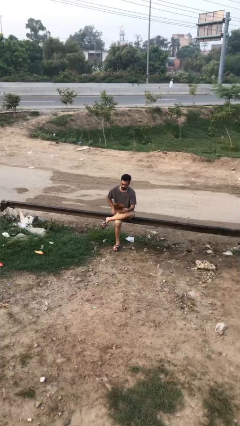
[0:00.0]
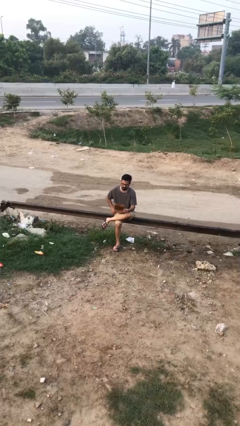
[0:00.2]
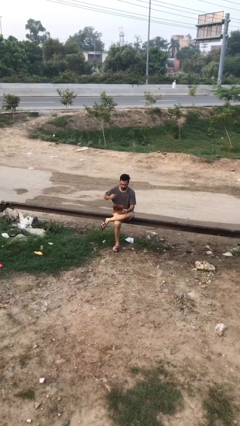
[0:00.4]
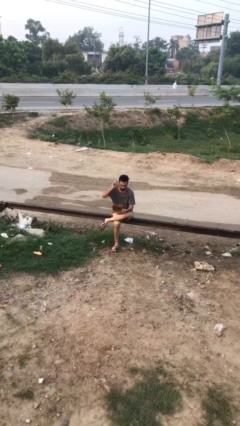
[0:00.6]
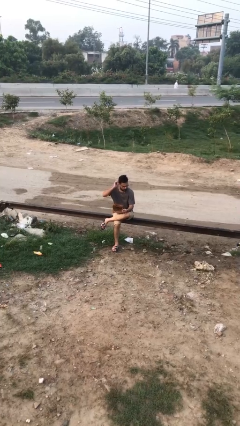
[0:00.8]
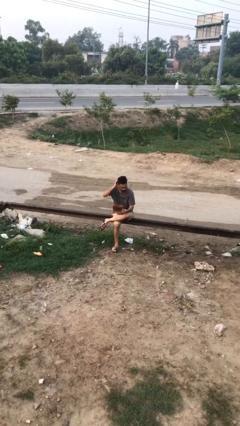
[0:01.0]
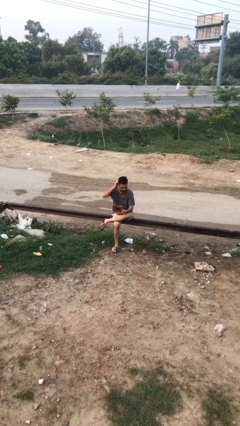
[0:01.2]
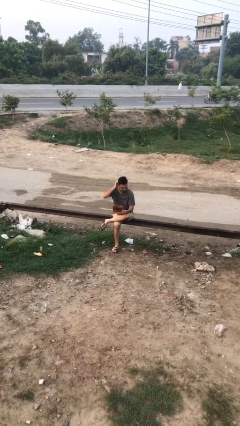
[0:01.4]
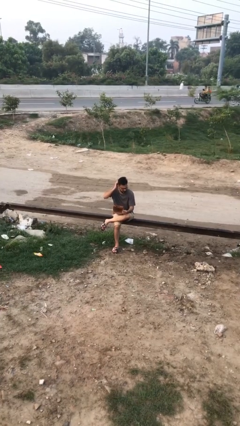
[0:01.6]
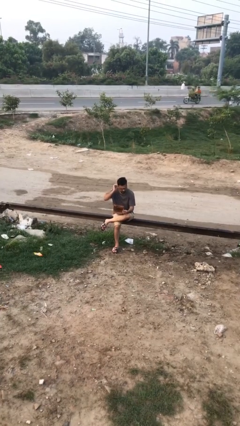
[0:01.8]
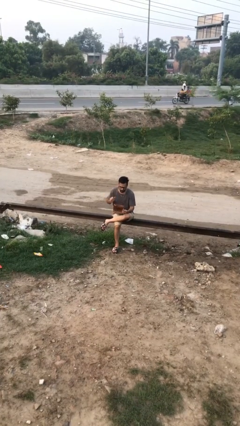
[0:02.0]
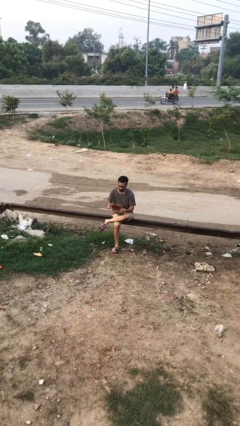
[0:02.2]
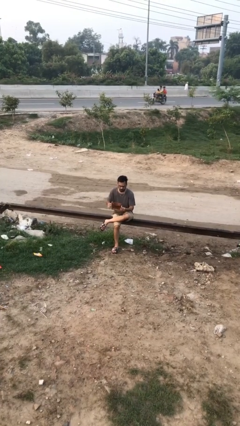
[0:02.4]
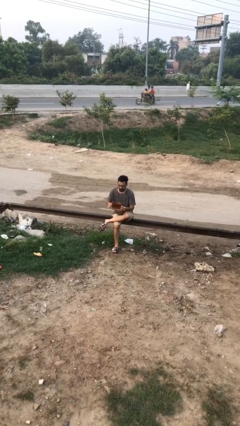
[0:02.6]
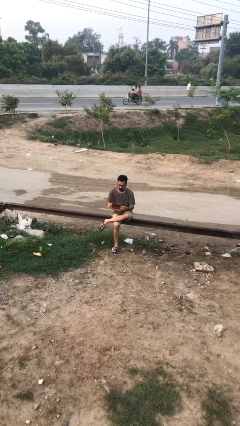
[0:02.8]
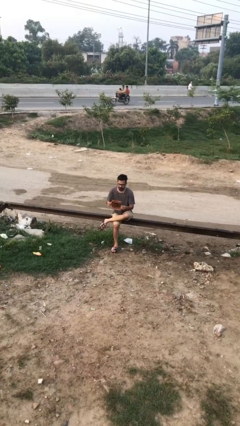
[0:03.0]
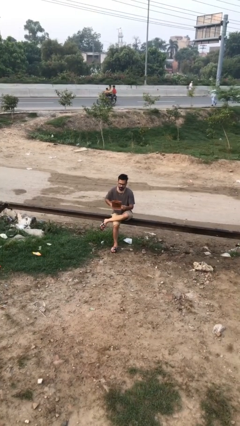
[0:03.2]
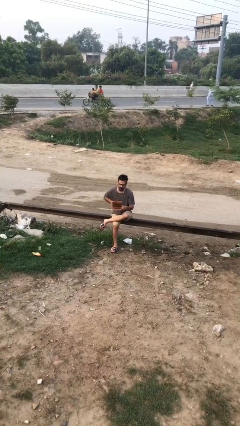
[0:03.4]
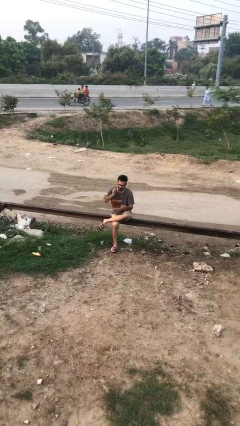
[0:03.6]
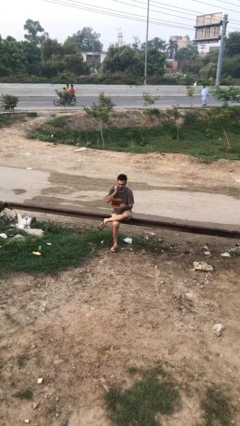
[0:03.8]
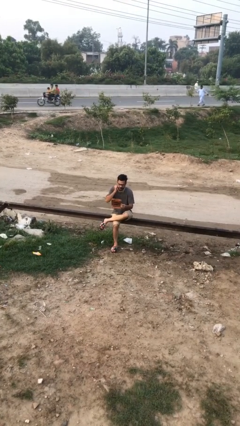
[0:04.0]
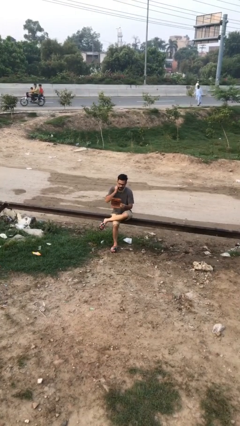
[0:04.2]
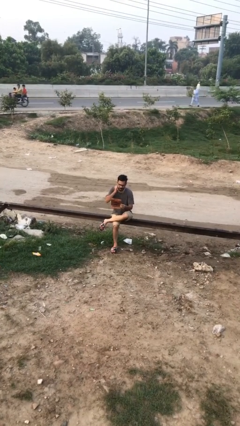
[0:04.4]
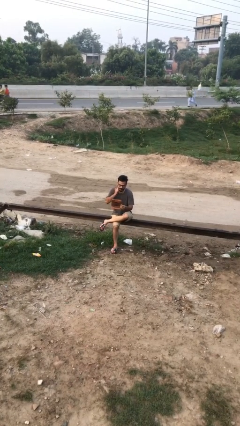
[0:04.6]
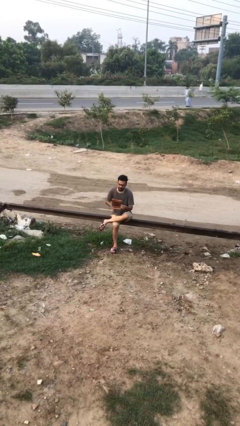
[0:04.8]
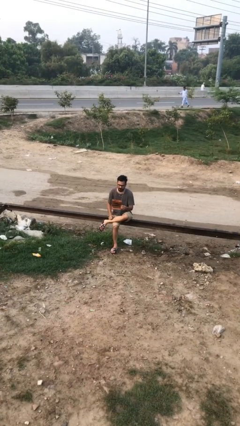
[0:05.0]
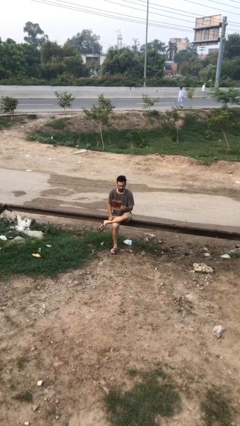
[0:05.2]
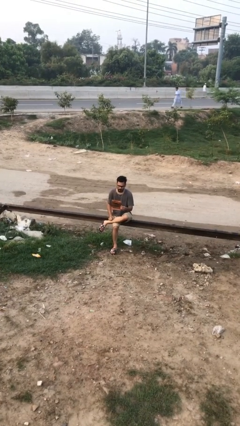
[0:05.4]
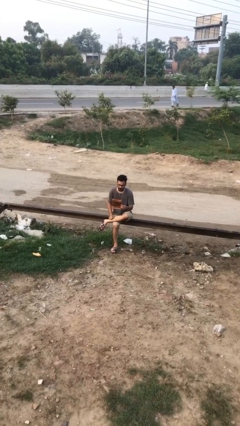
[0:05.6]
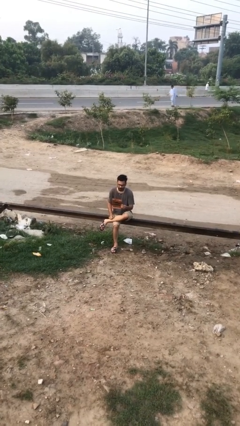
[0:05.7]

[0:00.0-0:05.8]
person reads document

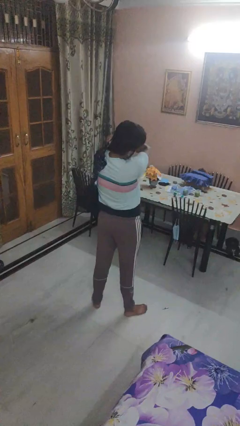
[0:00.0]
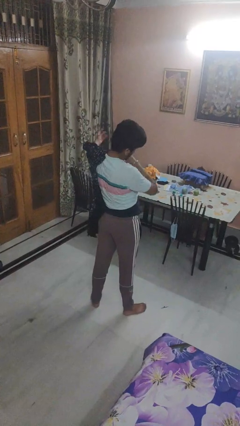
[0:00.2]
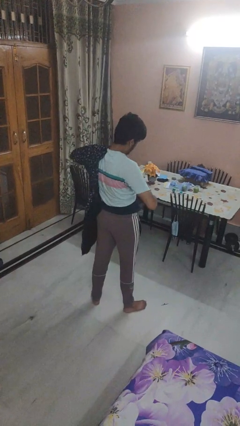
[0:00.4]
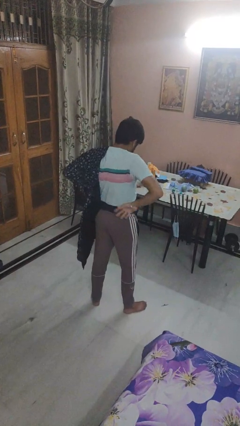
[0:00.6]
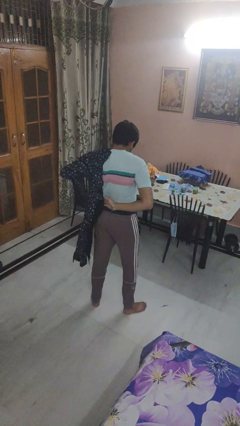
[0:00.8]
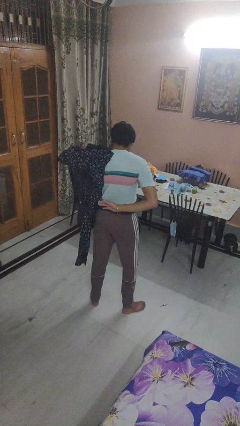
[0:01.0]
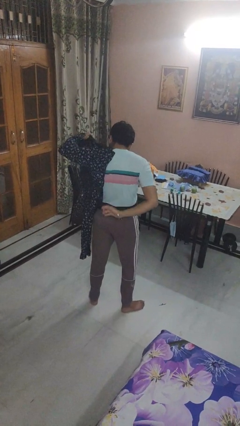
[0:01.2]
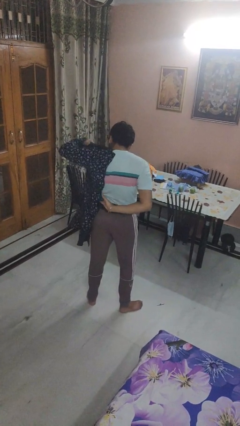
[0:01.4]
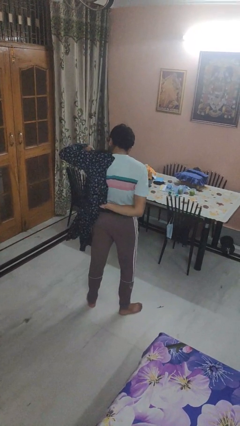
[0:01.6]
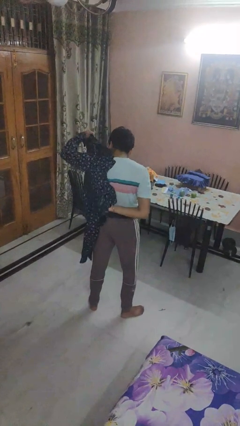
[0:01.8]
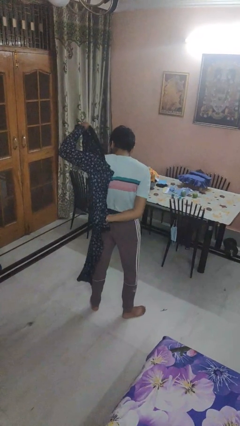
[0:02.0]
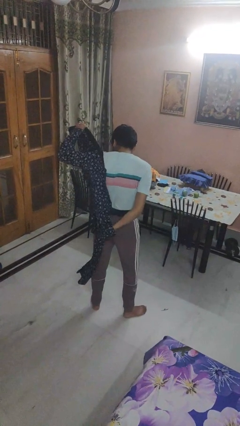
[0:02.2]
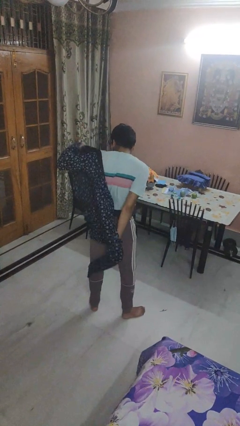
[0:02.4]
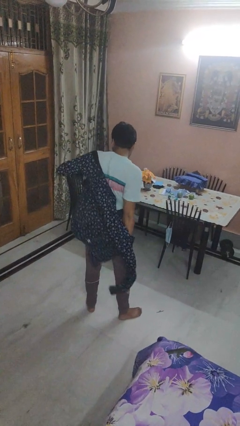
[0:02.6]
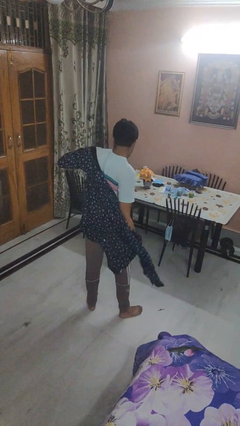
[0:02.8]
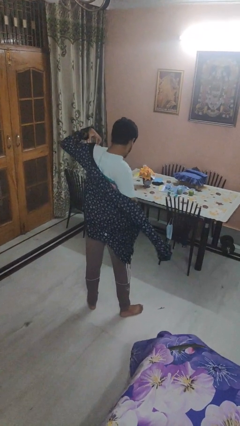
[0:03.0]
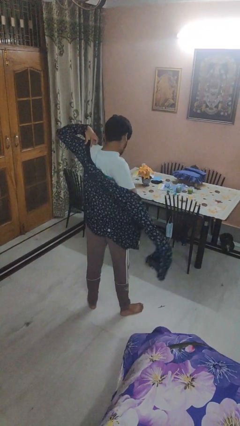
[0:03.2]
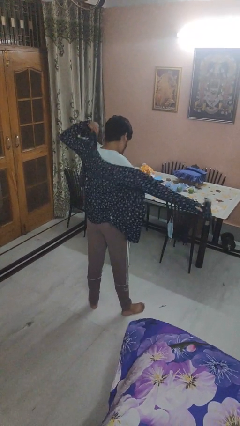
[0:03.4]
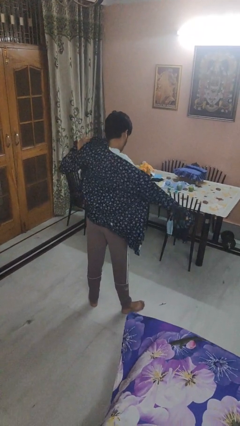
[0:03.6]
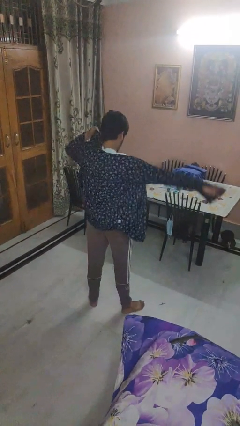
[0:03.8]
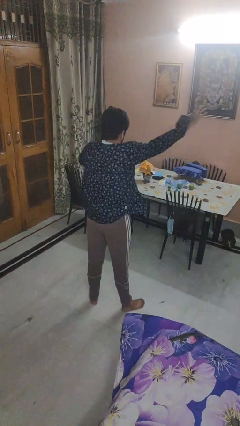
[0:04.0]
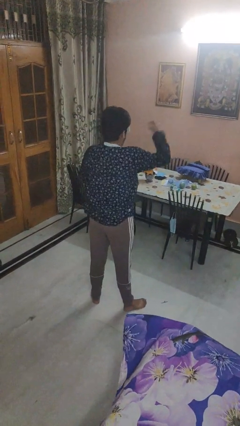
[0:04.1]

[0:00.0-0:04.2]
person puts on shirt

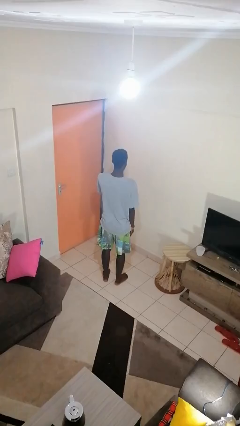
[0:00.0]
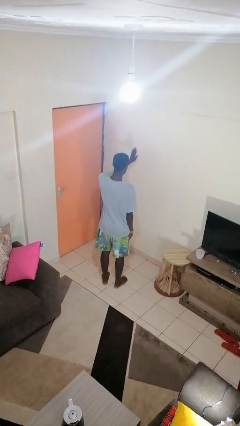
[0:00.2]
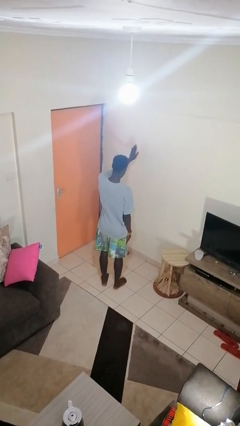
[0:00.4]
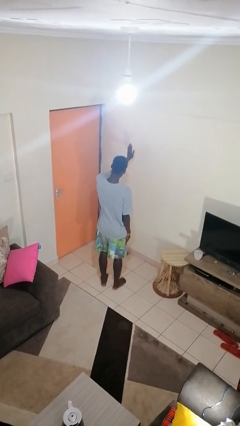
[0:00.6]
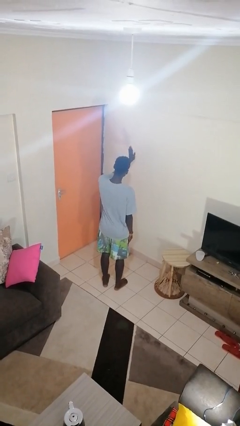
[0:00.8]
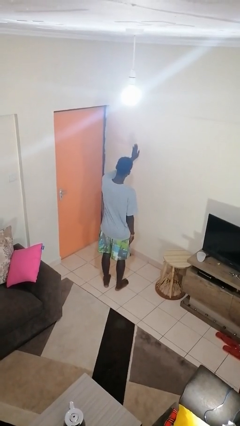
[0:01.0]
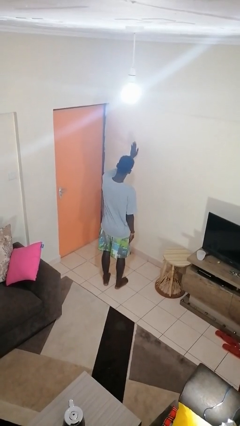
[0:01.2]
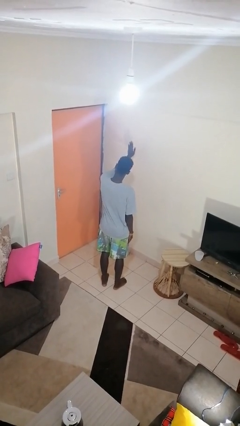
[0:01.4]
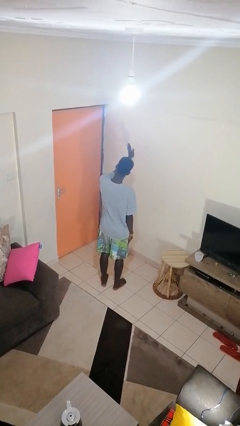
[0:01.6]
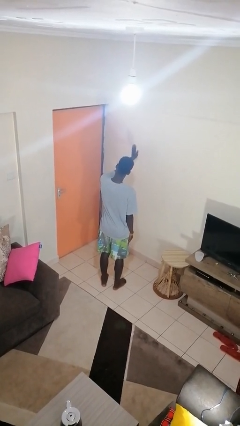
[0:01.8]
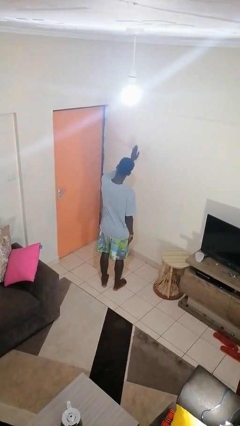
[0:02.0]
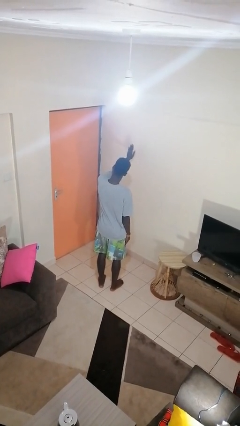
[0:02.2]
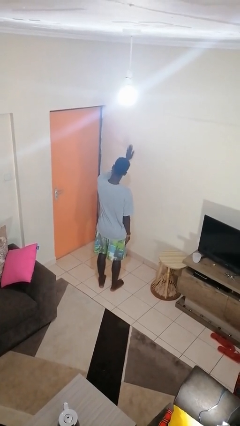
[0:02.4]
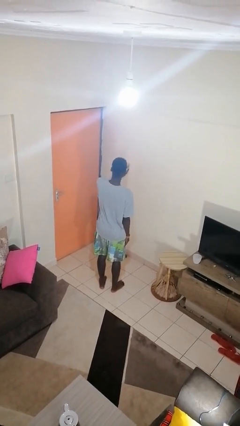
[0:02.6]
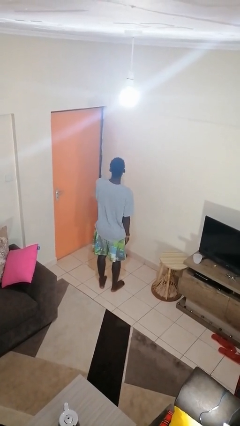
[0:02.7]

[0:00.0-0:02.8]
person gestures stop

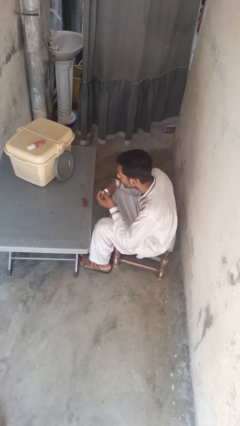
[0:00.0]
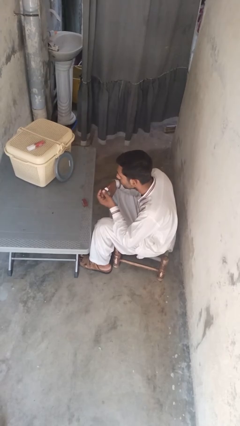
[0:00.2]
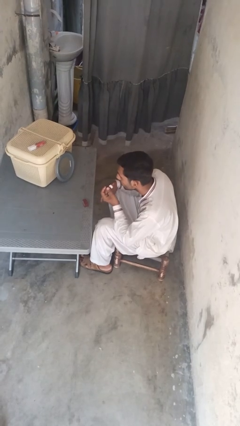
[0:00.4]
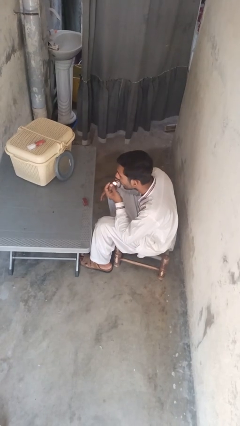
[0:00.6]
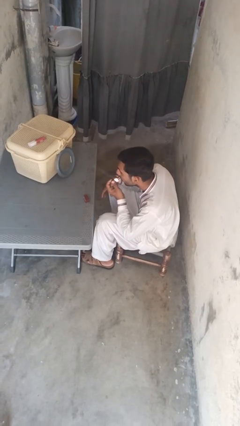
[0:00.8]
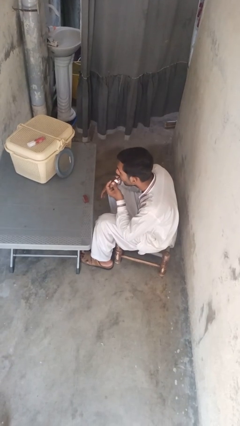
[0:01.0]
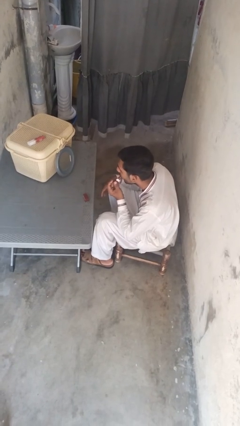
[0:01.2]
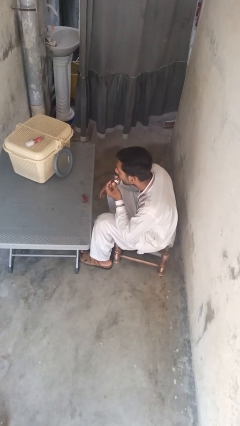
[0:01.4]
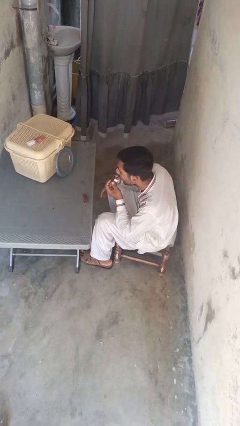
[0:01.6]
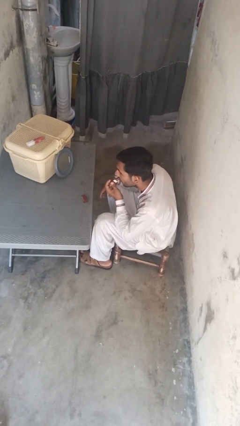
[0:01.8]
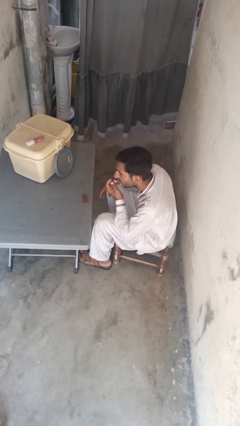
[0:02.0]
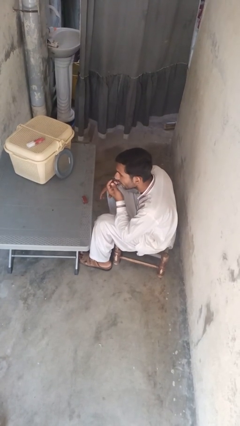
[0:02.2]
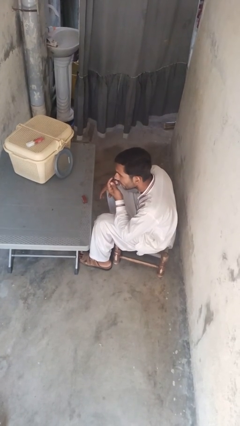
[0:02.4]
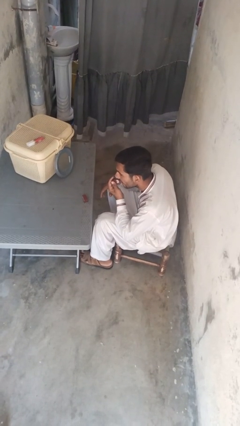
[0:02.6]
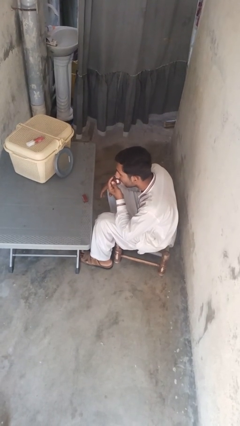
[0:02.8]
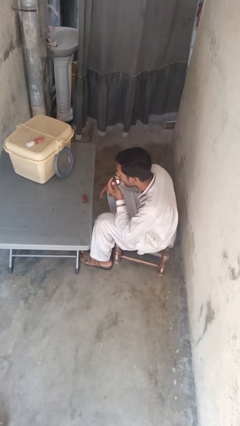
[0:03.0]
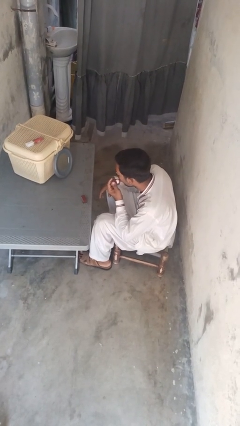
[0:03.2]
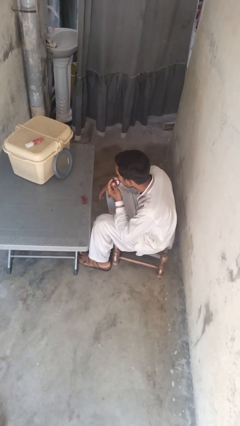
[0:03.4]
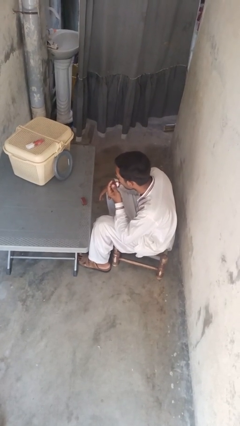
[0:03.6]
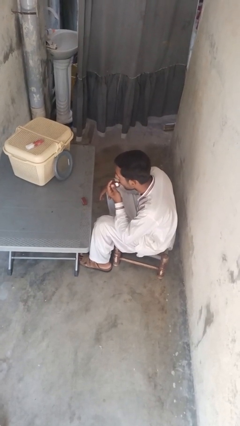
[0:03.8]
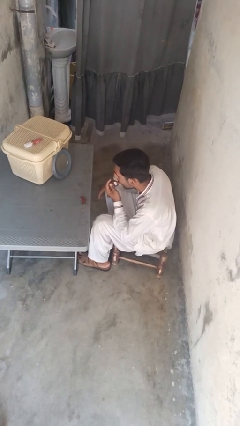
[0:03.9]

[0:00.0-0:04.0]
person applies lip makeup

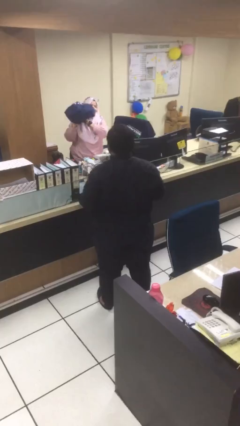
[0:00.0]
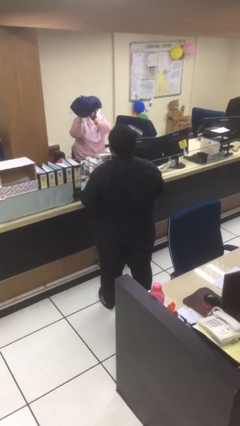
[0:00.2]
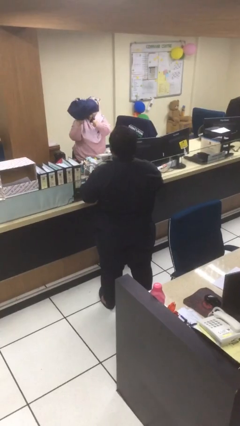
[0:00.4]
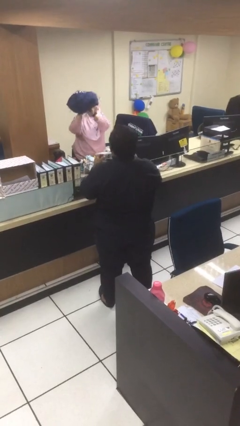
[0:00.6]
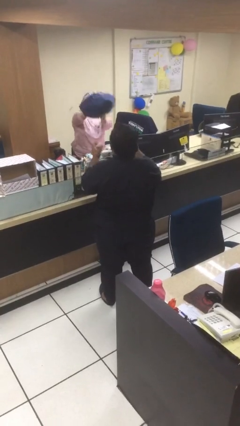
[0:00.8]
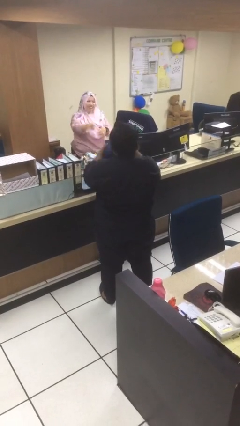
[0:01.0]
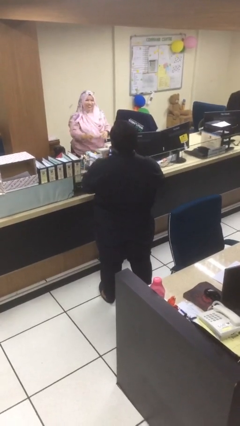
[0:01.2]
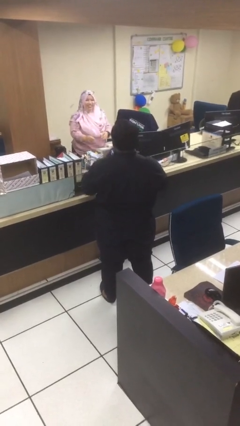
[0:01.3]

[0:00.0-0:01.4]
person catches object from person
